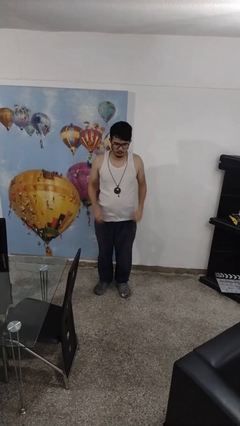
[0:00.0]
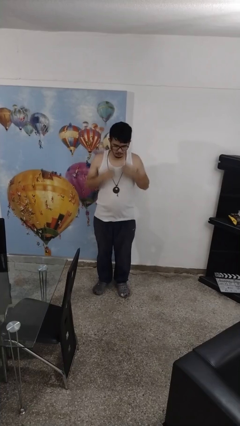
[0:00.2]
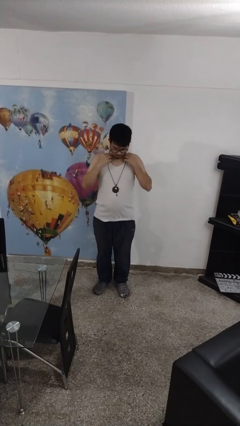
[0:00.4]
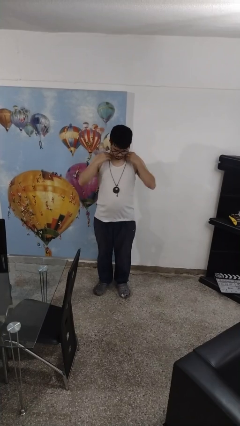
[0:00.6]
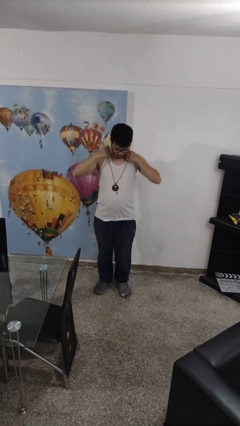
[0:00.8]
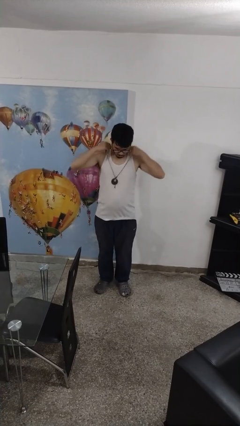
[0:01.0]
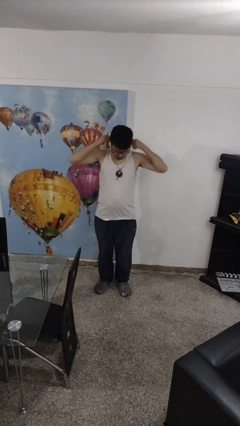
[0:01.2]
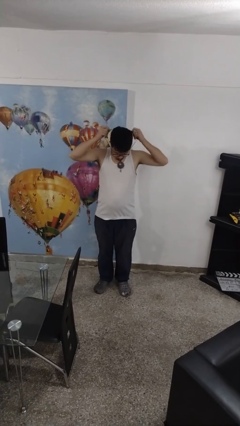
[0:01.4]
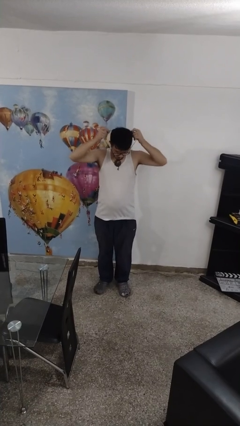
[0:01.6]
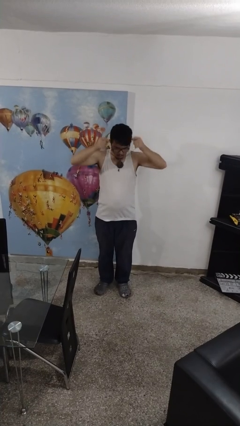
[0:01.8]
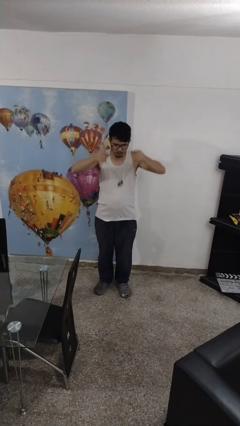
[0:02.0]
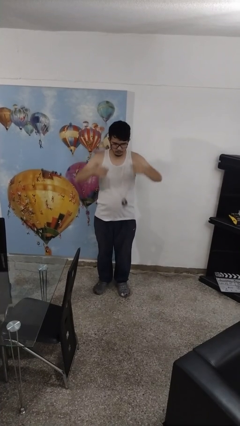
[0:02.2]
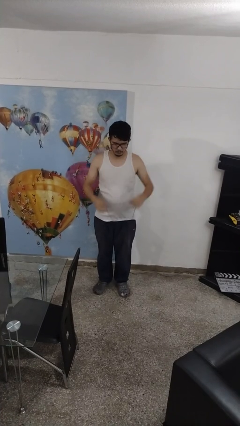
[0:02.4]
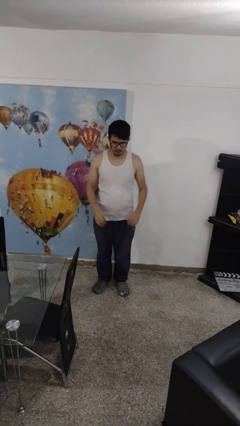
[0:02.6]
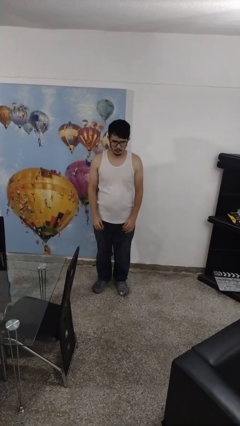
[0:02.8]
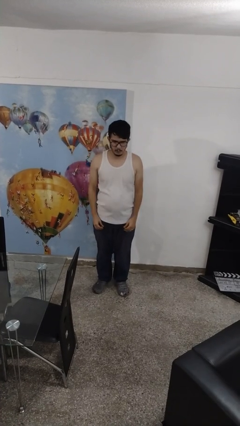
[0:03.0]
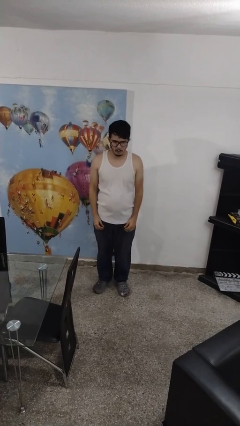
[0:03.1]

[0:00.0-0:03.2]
person takes off necklace

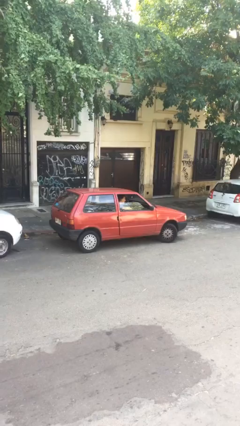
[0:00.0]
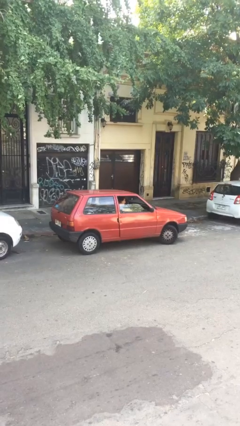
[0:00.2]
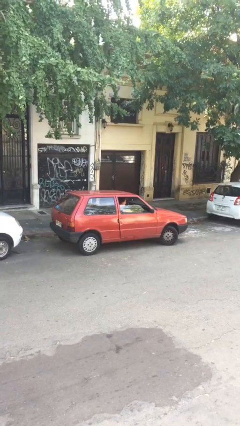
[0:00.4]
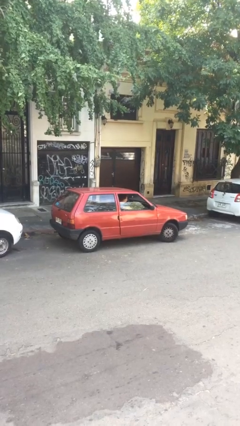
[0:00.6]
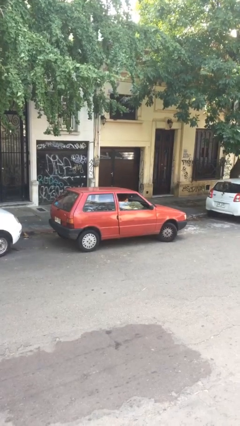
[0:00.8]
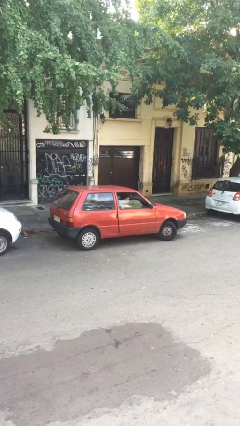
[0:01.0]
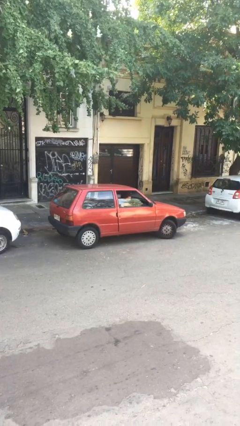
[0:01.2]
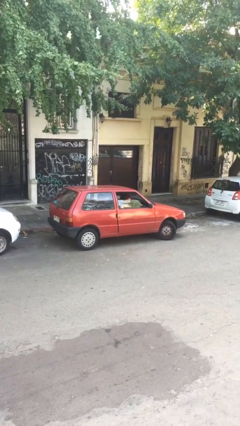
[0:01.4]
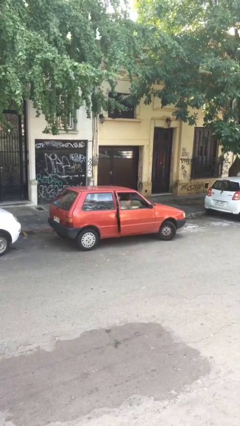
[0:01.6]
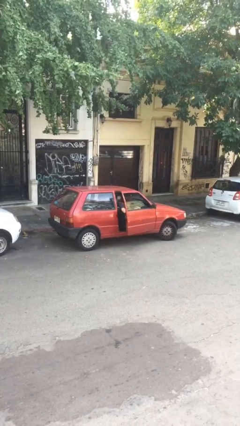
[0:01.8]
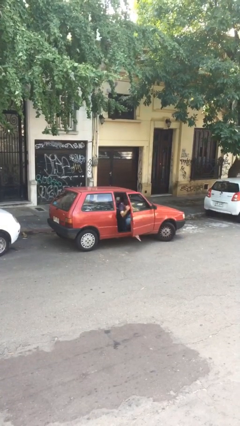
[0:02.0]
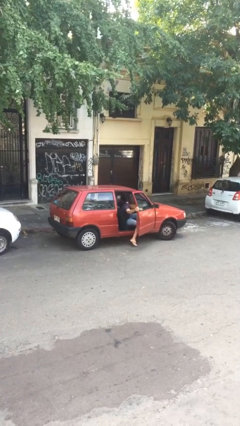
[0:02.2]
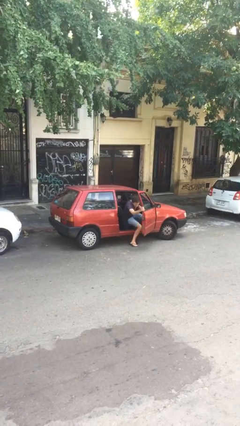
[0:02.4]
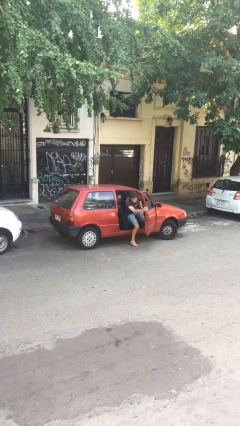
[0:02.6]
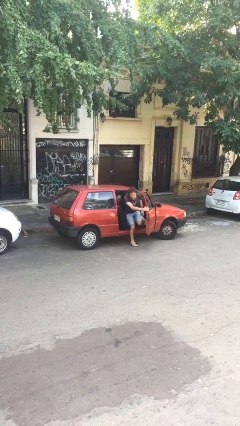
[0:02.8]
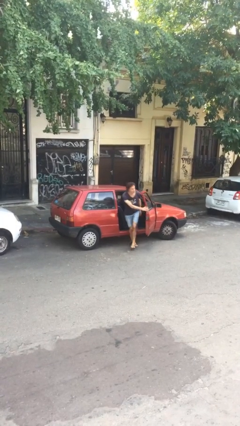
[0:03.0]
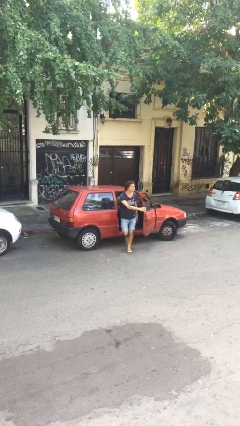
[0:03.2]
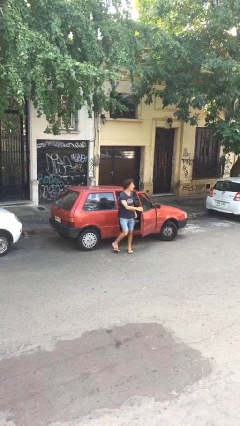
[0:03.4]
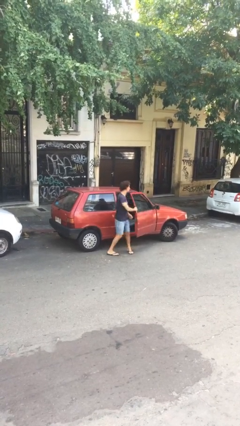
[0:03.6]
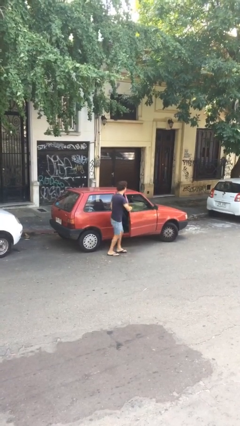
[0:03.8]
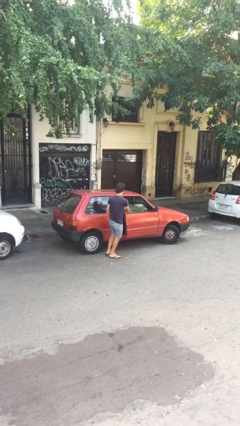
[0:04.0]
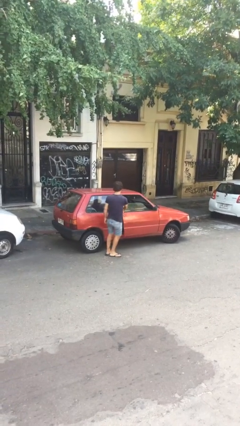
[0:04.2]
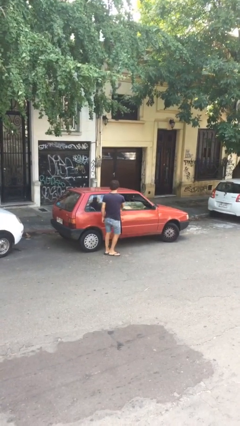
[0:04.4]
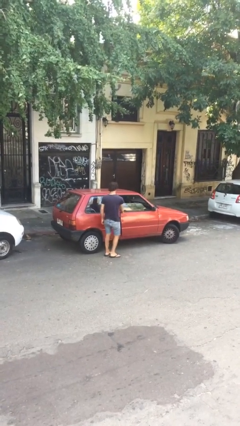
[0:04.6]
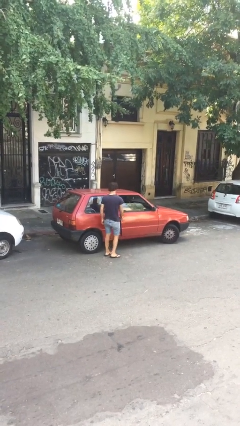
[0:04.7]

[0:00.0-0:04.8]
car drops off person

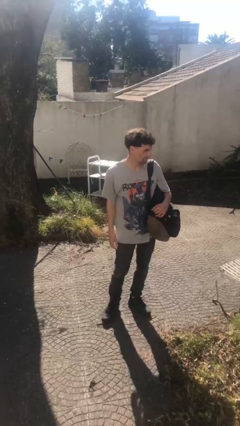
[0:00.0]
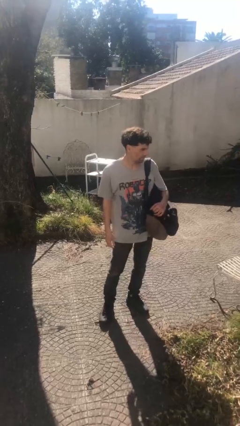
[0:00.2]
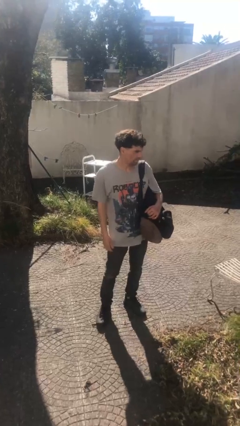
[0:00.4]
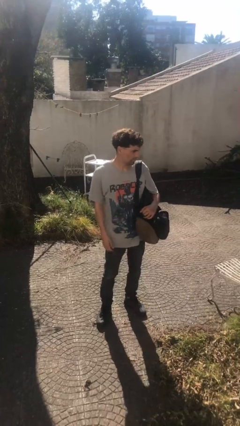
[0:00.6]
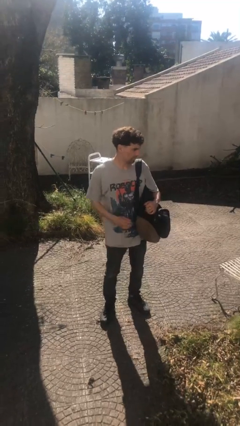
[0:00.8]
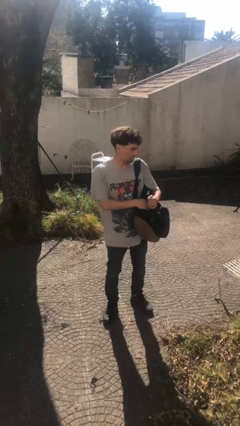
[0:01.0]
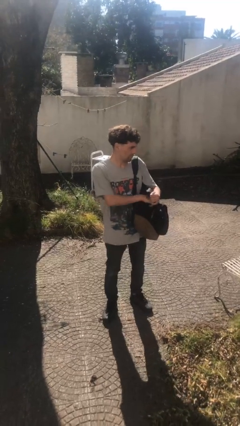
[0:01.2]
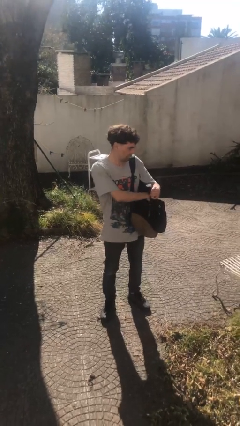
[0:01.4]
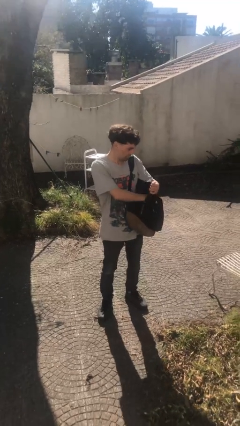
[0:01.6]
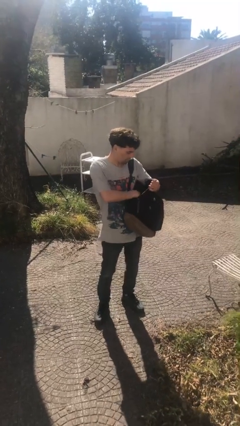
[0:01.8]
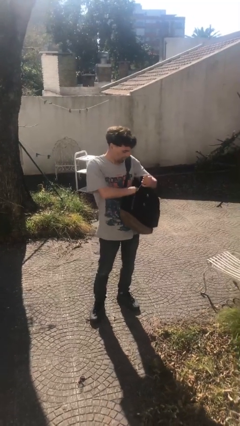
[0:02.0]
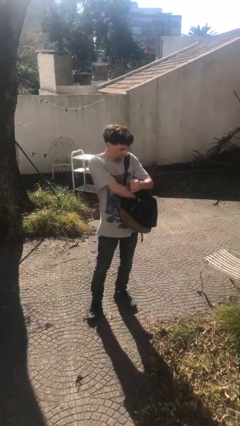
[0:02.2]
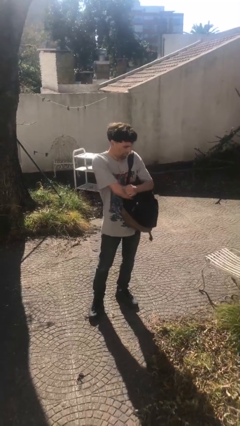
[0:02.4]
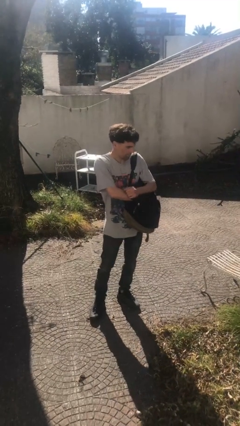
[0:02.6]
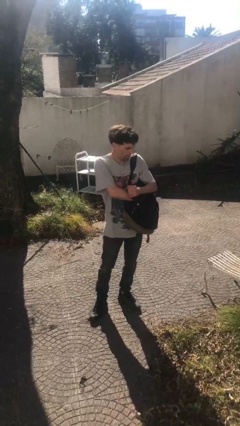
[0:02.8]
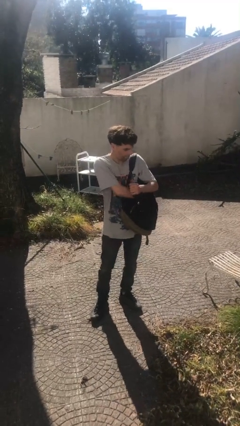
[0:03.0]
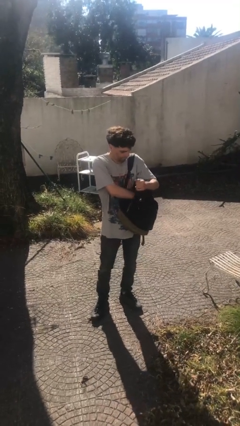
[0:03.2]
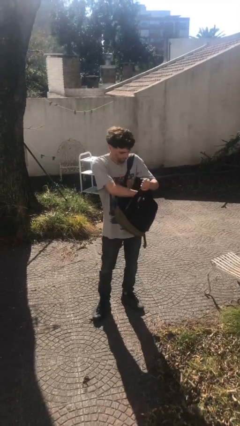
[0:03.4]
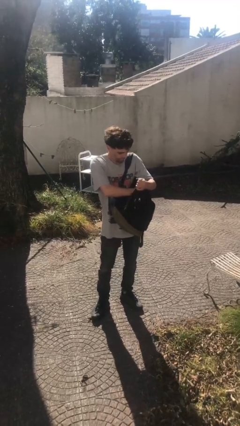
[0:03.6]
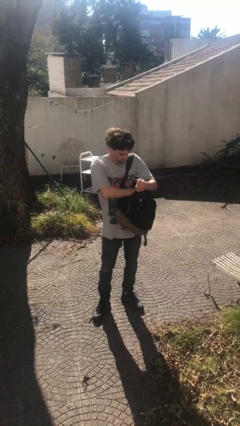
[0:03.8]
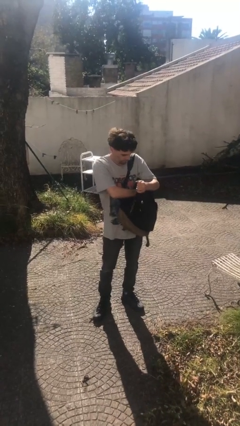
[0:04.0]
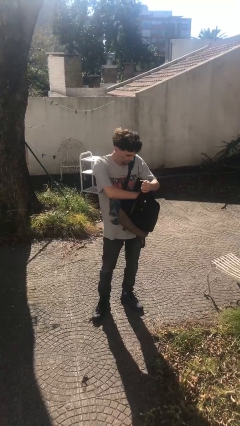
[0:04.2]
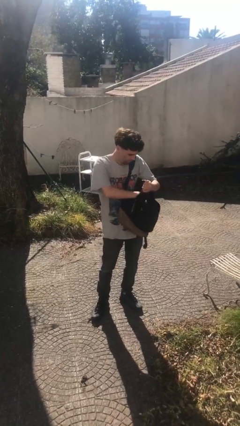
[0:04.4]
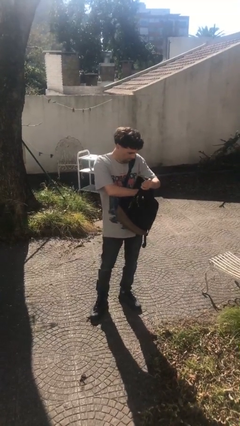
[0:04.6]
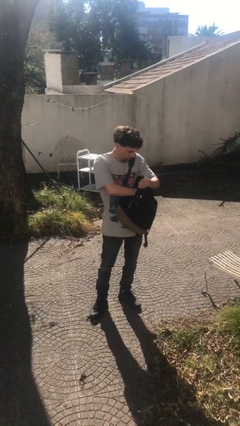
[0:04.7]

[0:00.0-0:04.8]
person searches in backpack

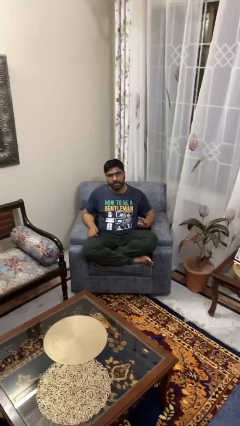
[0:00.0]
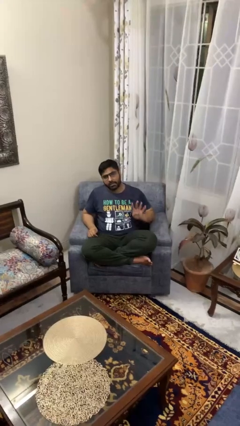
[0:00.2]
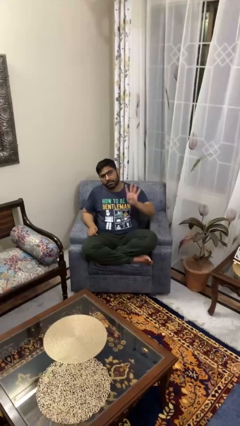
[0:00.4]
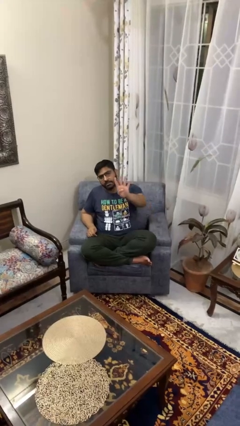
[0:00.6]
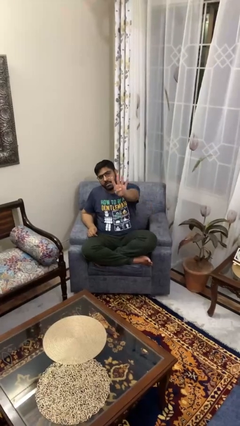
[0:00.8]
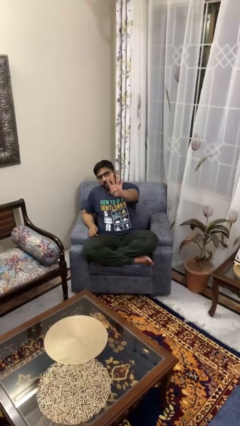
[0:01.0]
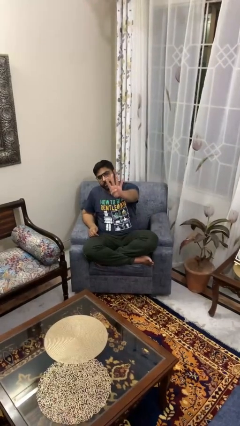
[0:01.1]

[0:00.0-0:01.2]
person gestures number four

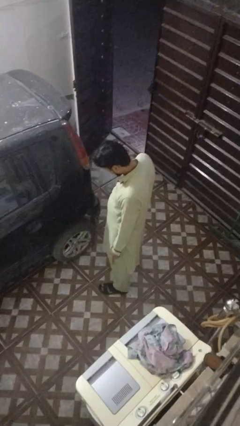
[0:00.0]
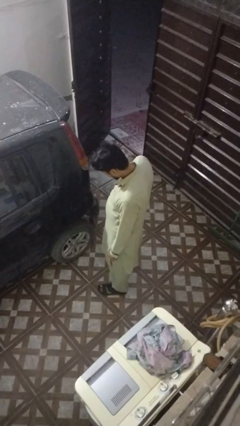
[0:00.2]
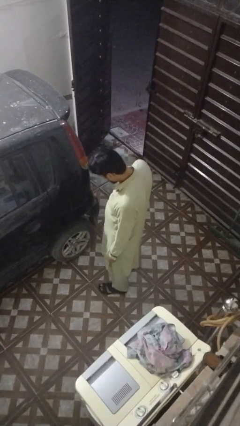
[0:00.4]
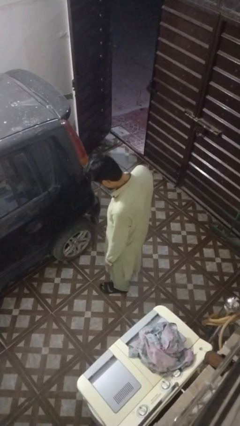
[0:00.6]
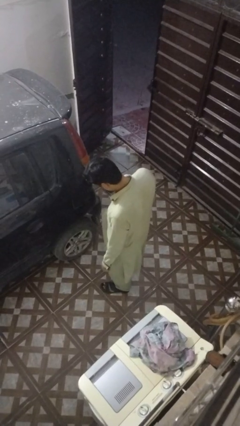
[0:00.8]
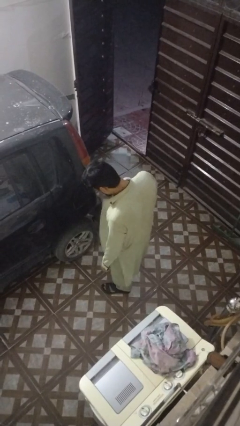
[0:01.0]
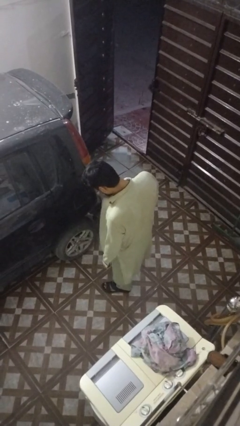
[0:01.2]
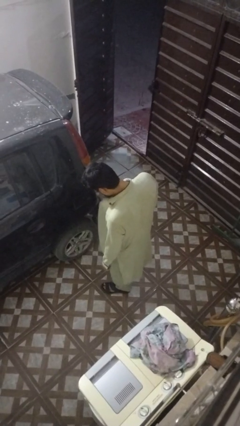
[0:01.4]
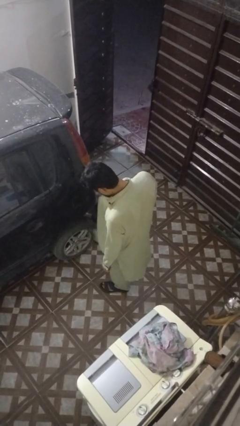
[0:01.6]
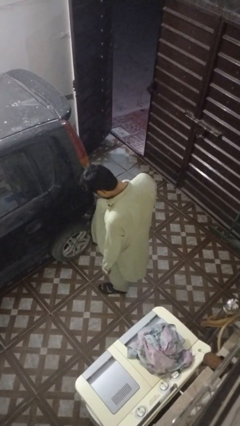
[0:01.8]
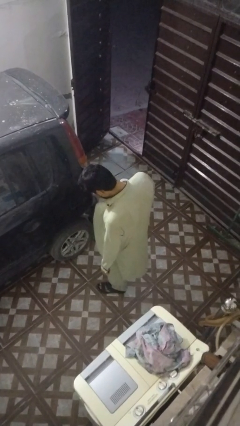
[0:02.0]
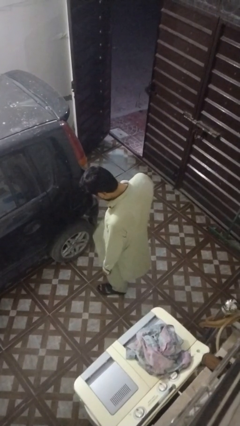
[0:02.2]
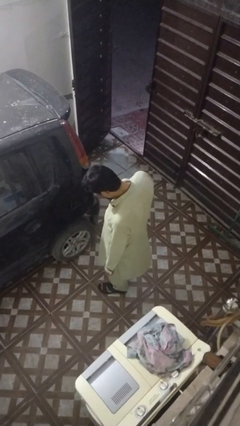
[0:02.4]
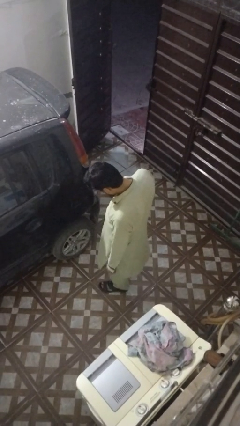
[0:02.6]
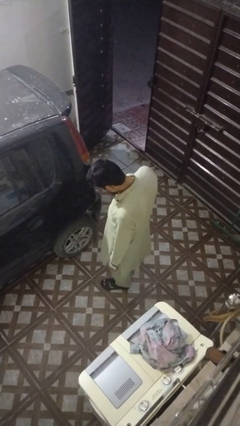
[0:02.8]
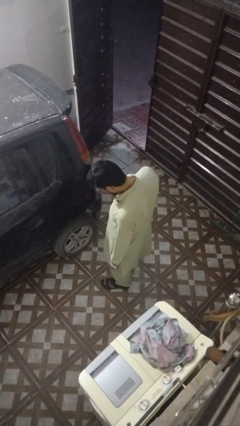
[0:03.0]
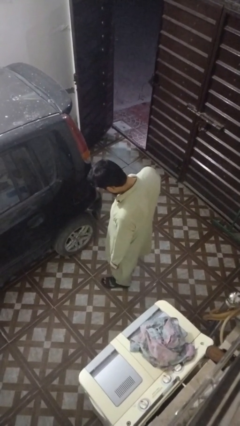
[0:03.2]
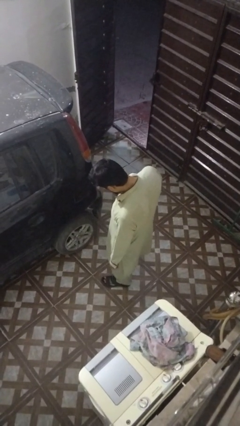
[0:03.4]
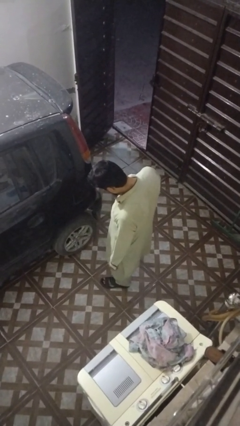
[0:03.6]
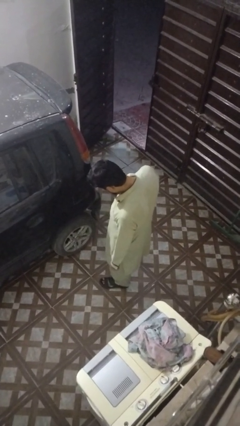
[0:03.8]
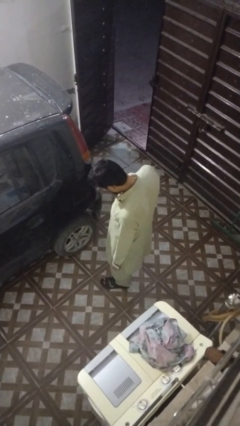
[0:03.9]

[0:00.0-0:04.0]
person kicks car tires
